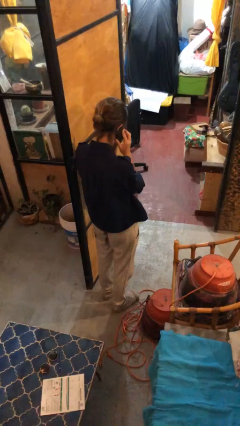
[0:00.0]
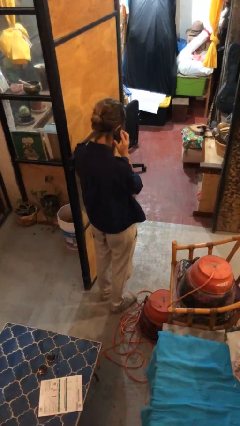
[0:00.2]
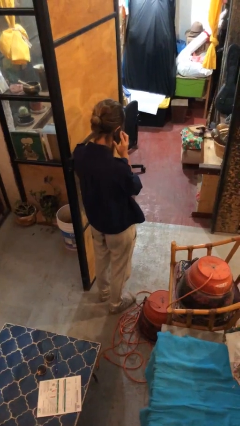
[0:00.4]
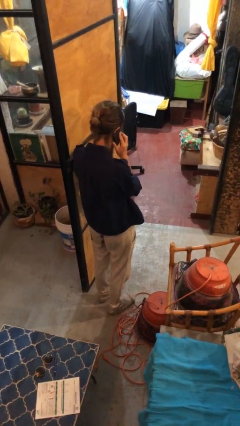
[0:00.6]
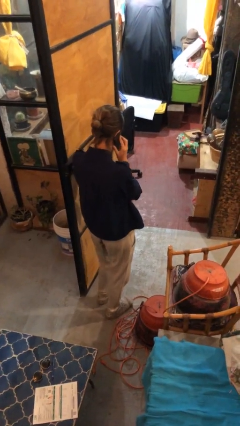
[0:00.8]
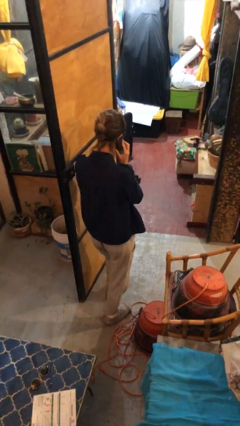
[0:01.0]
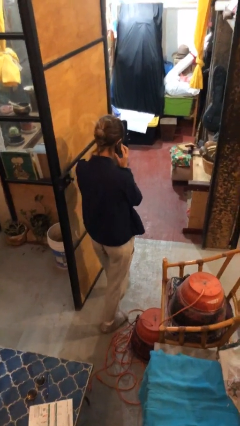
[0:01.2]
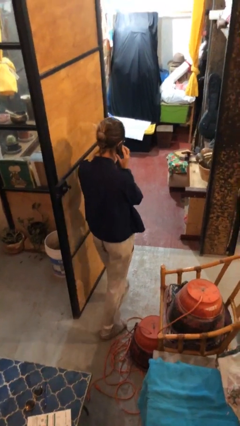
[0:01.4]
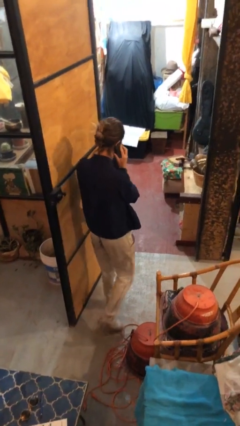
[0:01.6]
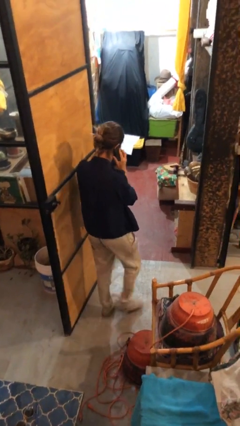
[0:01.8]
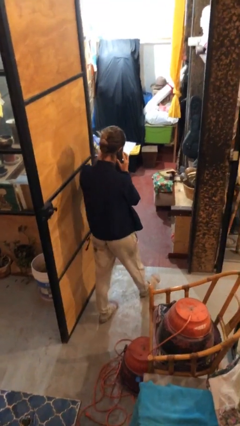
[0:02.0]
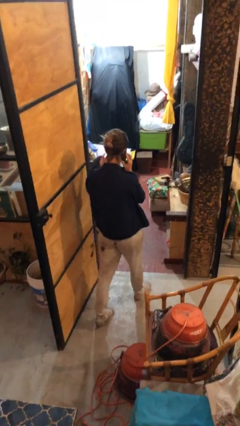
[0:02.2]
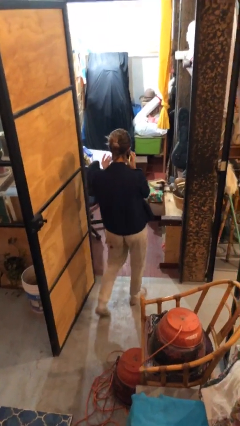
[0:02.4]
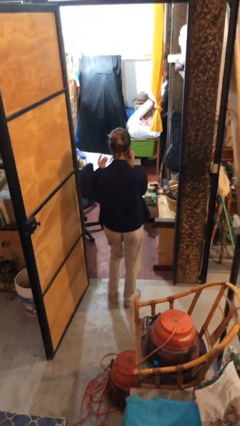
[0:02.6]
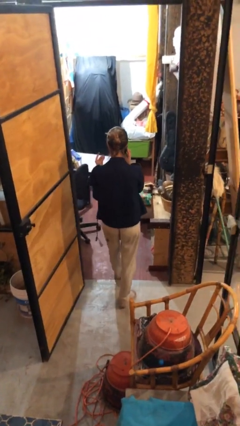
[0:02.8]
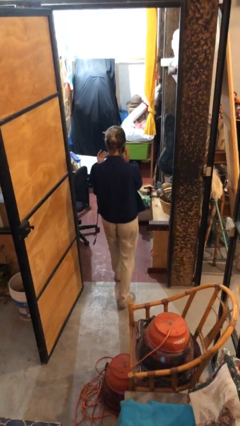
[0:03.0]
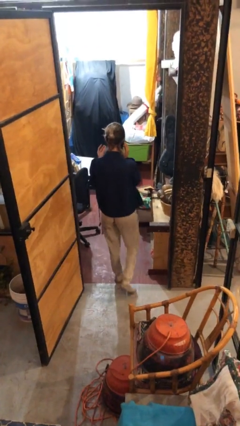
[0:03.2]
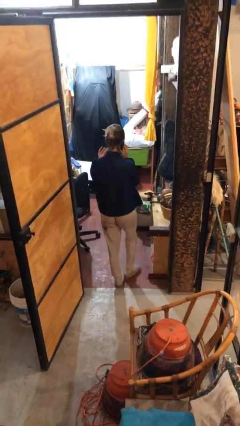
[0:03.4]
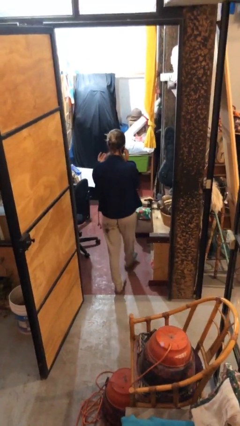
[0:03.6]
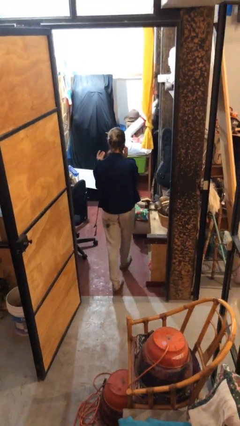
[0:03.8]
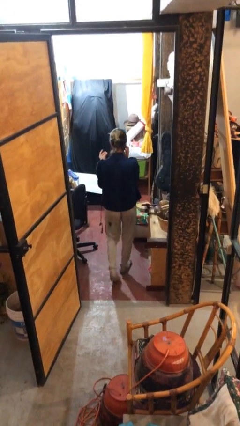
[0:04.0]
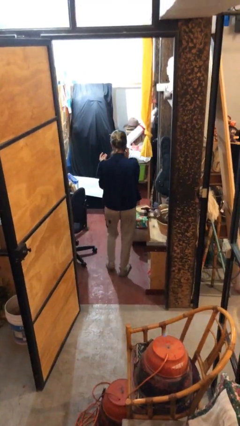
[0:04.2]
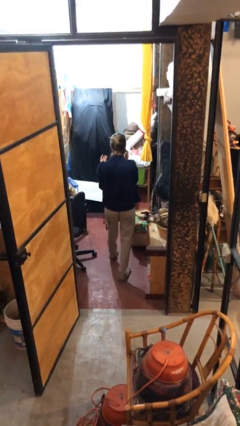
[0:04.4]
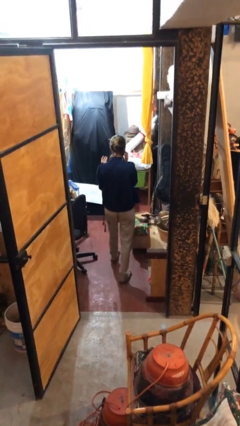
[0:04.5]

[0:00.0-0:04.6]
person exits scene through structure

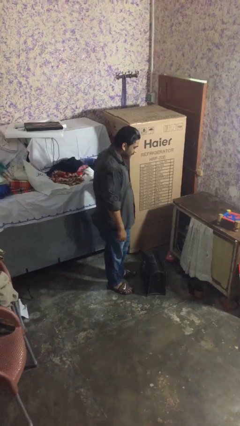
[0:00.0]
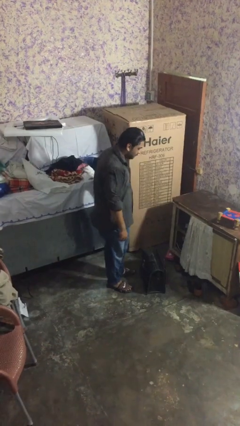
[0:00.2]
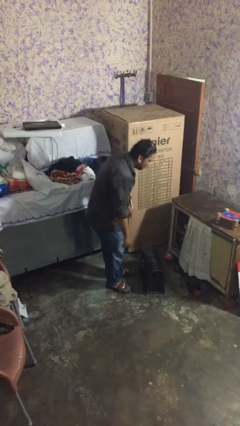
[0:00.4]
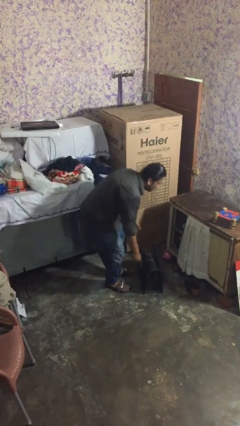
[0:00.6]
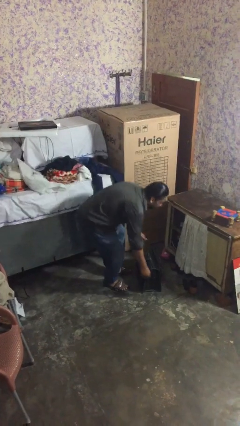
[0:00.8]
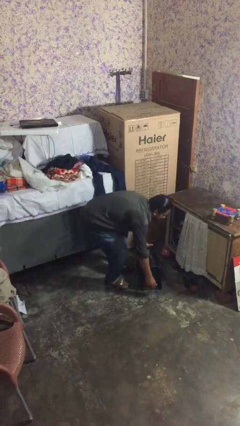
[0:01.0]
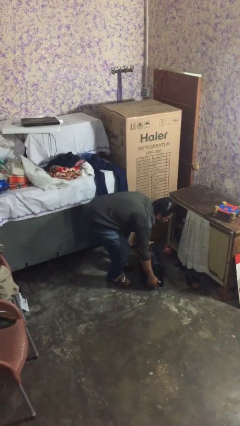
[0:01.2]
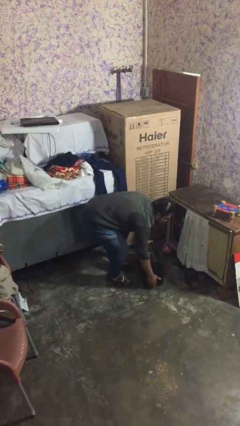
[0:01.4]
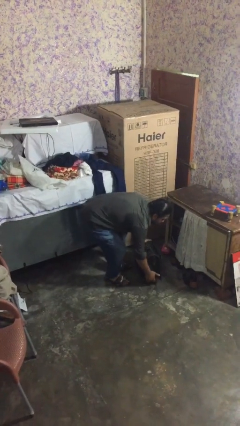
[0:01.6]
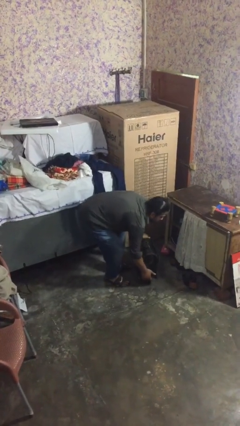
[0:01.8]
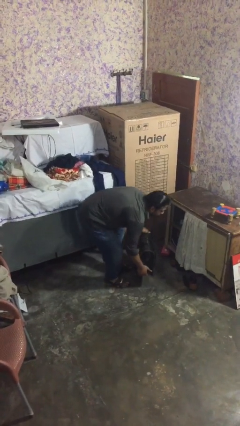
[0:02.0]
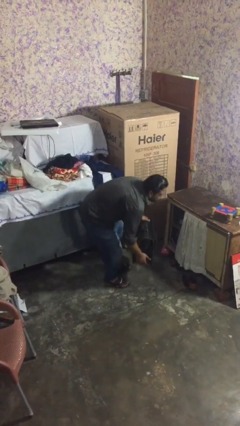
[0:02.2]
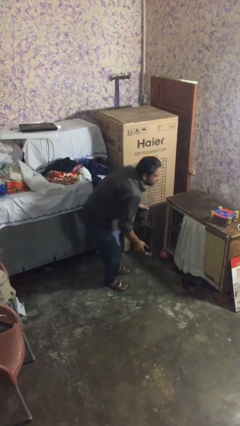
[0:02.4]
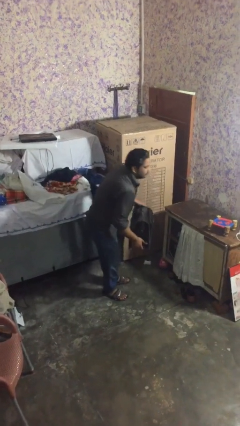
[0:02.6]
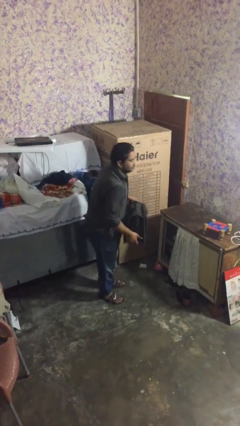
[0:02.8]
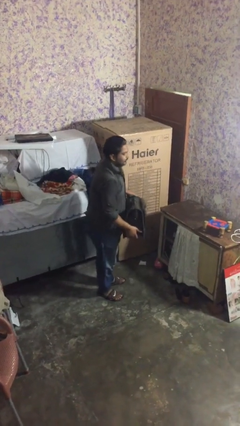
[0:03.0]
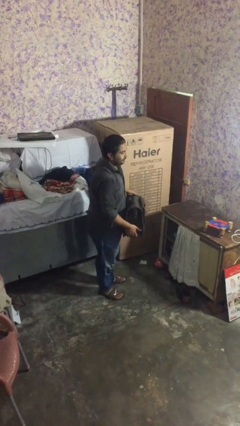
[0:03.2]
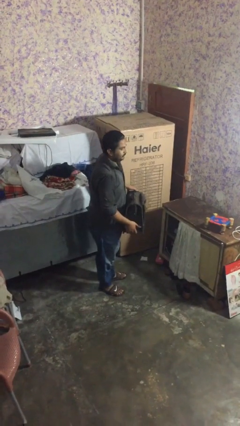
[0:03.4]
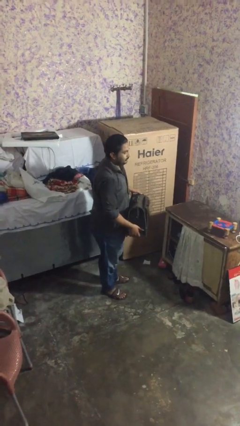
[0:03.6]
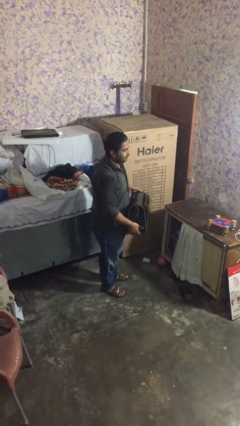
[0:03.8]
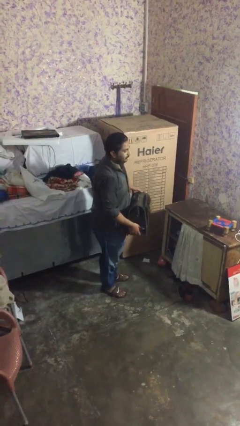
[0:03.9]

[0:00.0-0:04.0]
person picks up object from floor

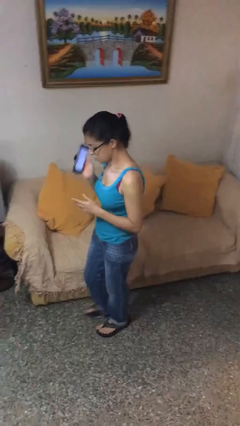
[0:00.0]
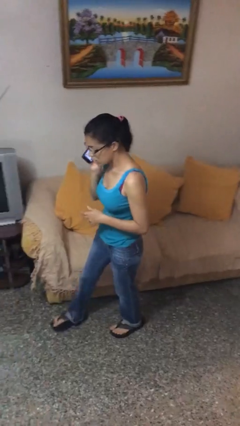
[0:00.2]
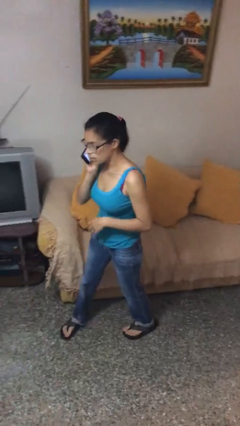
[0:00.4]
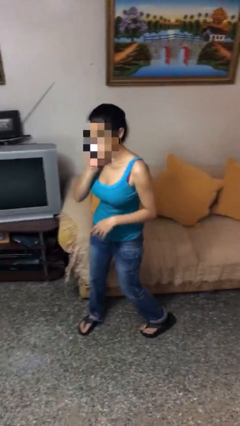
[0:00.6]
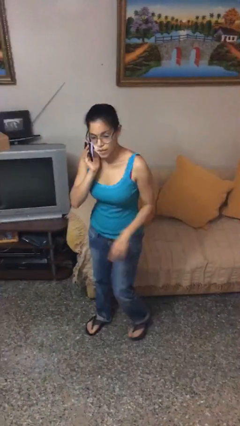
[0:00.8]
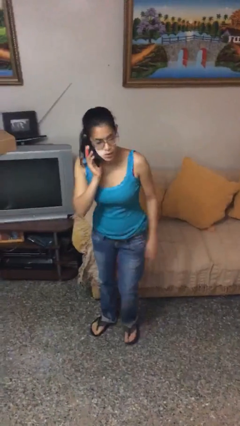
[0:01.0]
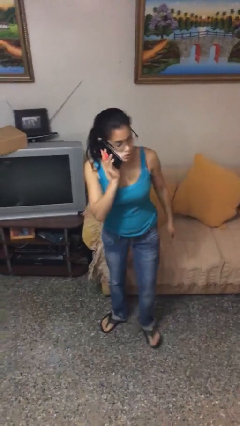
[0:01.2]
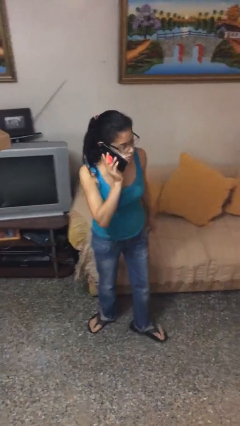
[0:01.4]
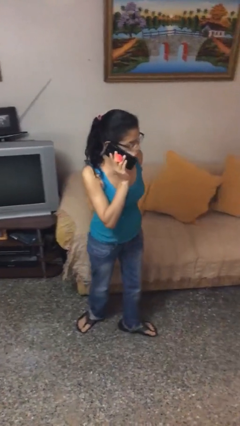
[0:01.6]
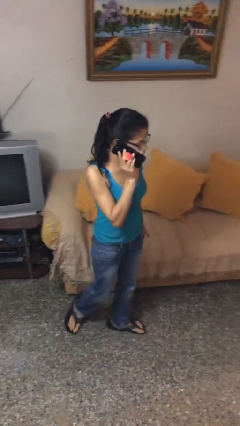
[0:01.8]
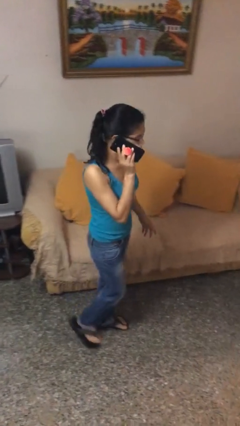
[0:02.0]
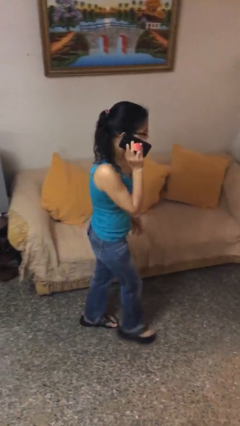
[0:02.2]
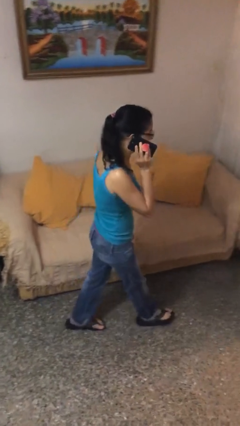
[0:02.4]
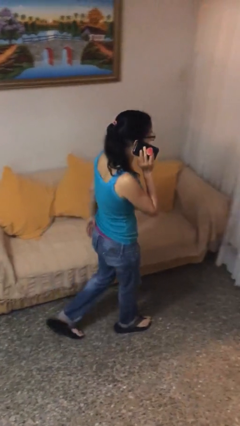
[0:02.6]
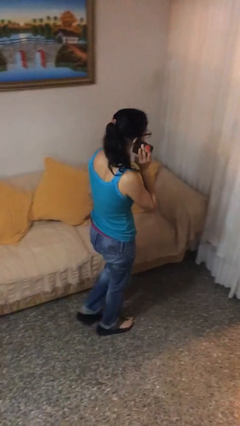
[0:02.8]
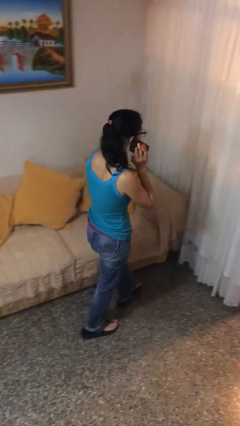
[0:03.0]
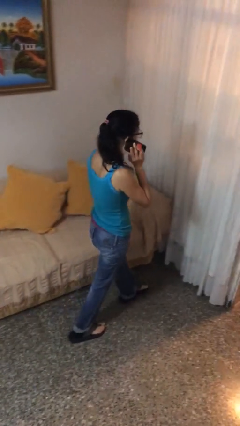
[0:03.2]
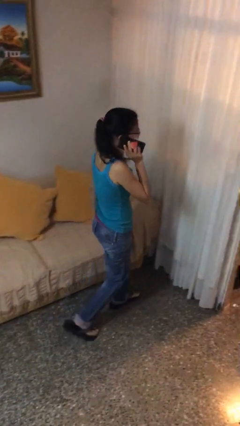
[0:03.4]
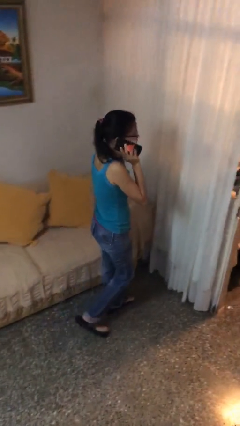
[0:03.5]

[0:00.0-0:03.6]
person talks on phone

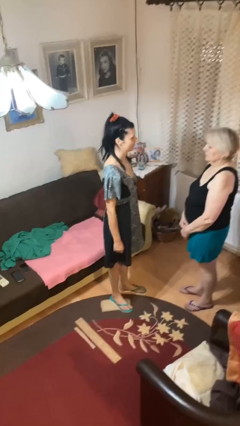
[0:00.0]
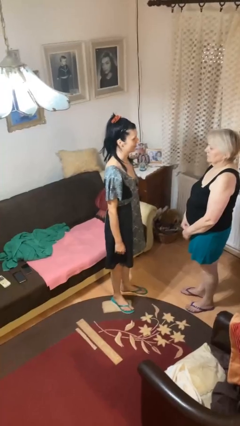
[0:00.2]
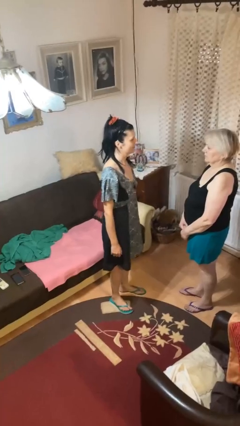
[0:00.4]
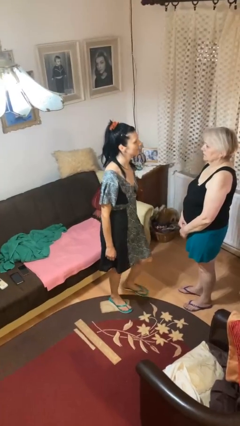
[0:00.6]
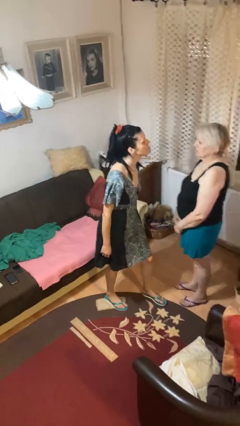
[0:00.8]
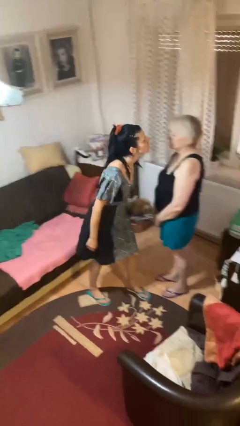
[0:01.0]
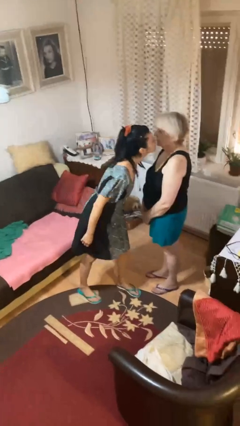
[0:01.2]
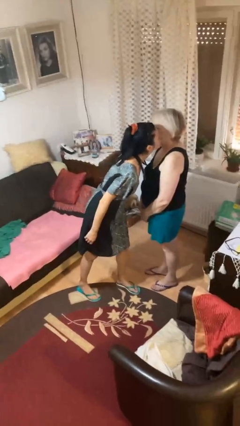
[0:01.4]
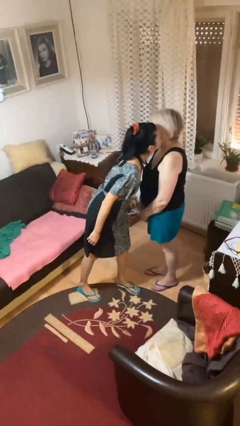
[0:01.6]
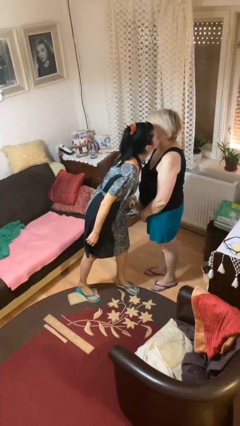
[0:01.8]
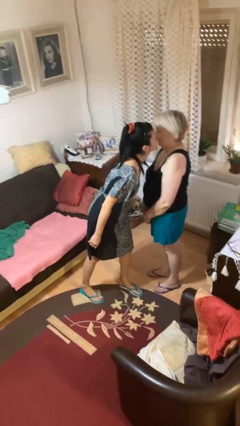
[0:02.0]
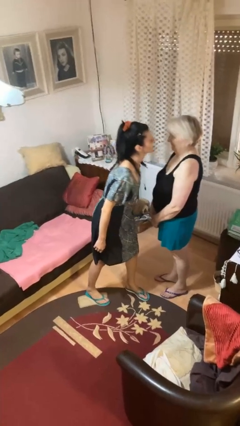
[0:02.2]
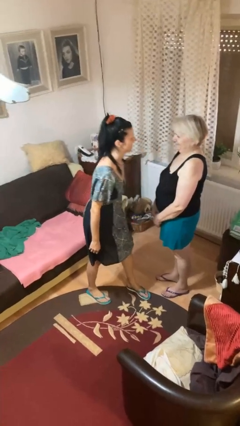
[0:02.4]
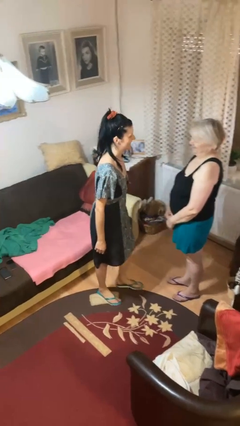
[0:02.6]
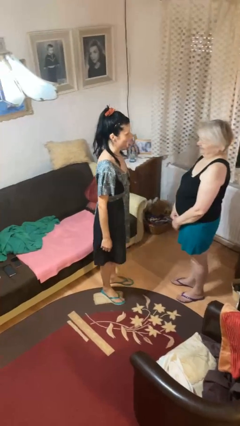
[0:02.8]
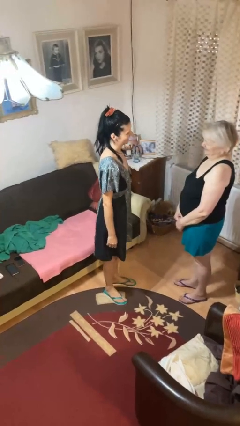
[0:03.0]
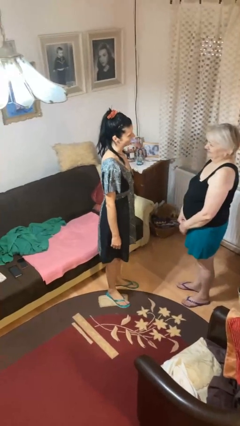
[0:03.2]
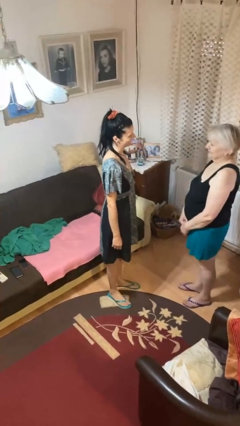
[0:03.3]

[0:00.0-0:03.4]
person kisses cheek of person

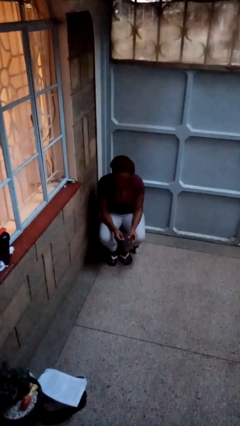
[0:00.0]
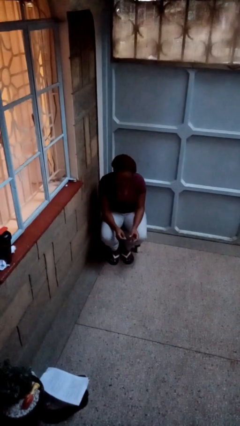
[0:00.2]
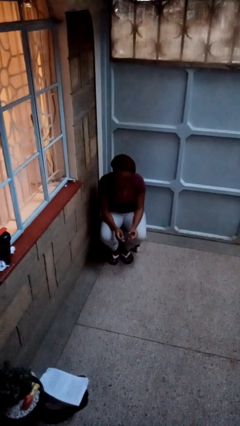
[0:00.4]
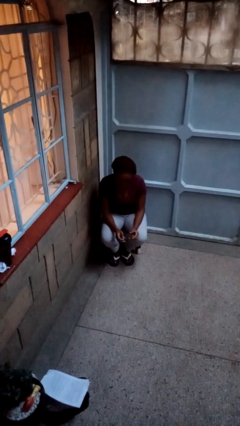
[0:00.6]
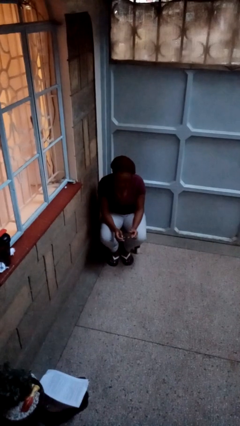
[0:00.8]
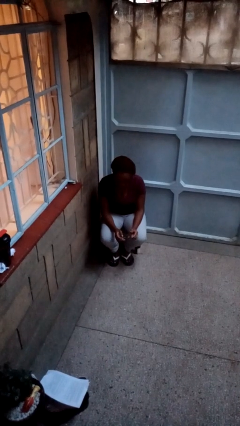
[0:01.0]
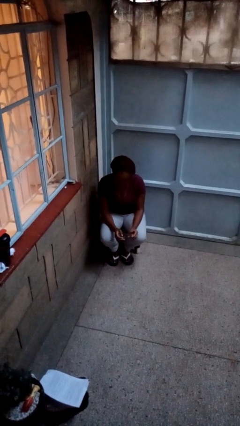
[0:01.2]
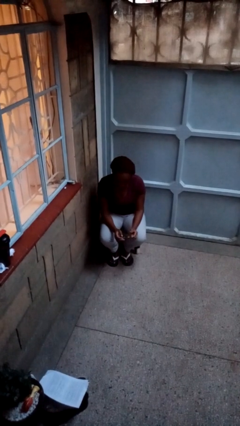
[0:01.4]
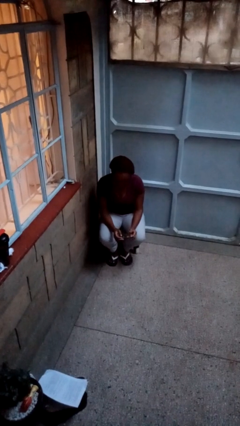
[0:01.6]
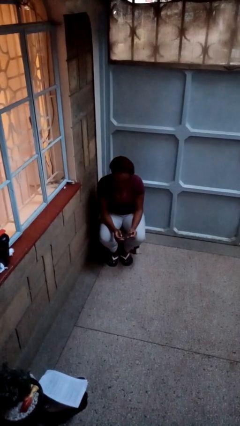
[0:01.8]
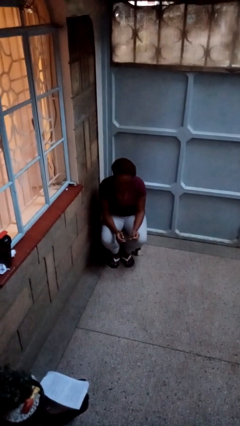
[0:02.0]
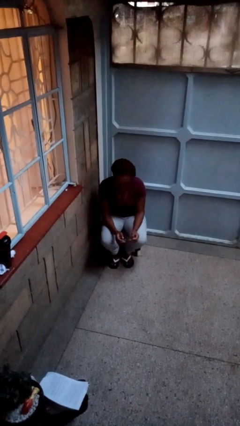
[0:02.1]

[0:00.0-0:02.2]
person clips fingernails

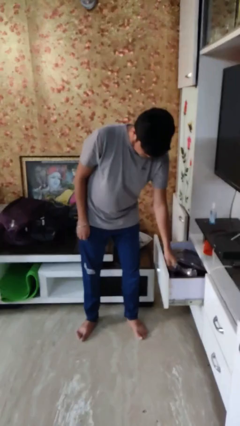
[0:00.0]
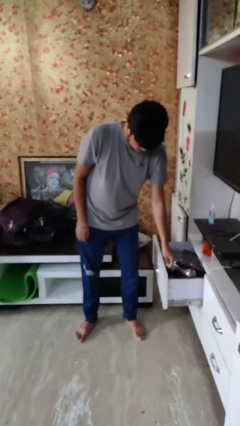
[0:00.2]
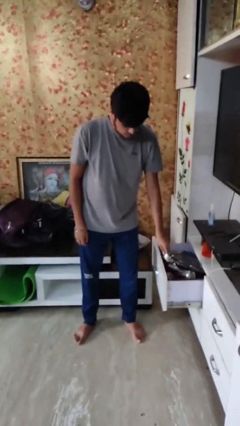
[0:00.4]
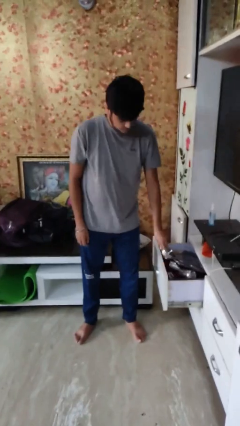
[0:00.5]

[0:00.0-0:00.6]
person takes object from kitchen drawer
